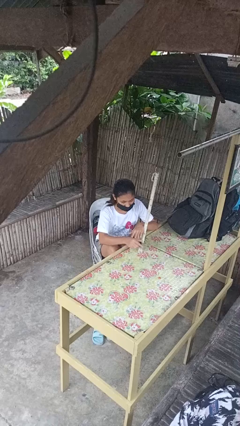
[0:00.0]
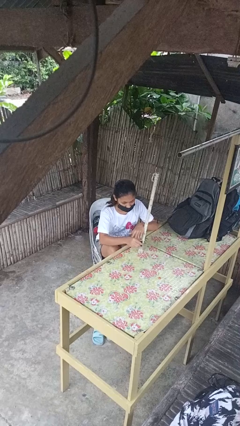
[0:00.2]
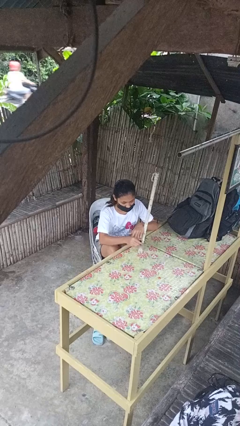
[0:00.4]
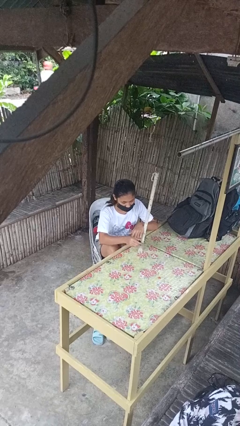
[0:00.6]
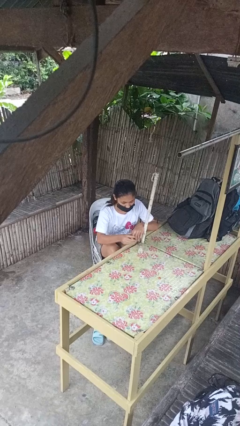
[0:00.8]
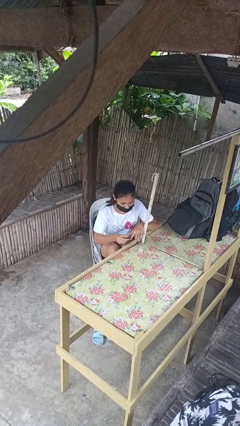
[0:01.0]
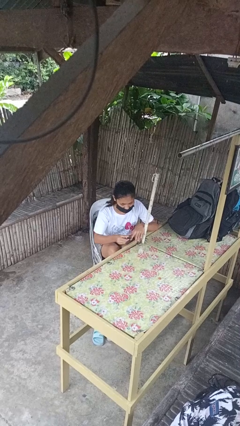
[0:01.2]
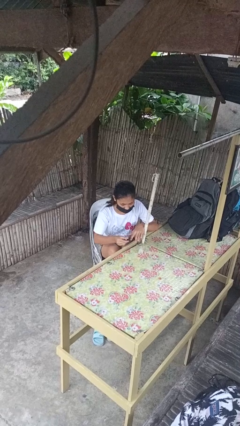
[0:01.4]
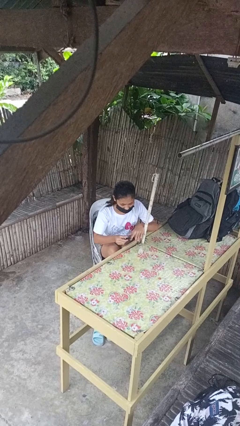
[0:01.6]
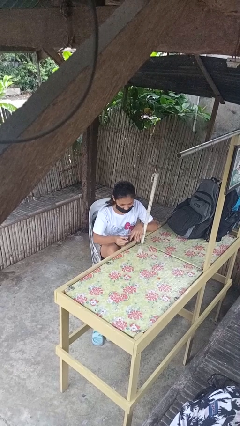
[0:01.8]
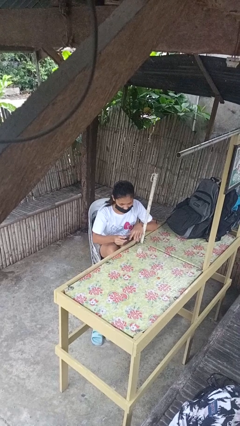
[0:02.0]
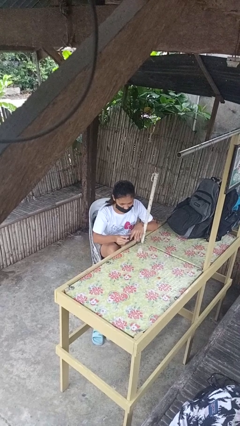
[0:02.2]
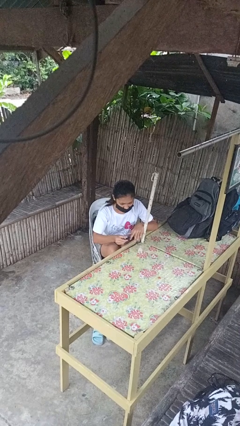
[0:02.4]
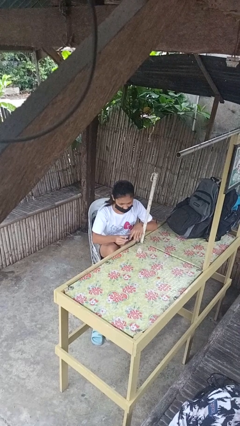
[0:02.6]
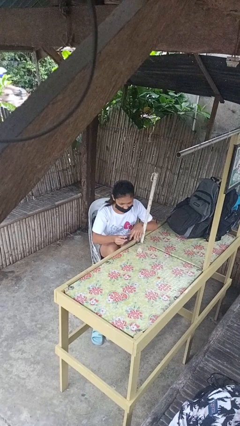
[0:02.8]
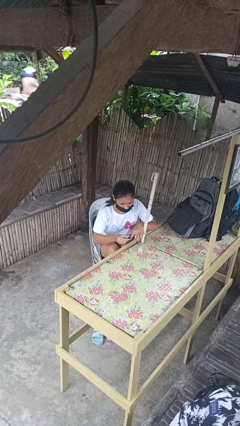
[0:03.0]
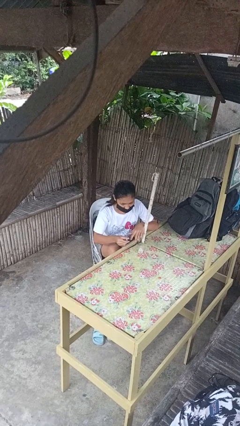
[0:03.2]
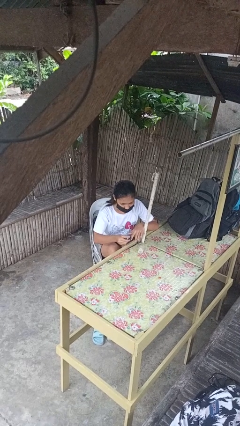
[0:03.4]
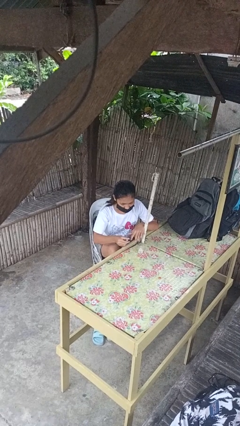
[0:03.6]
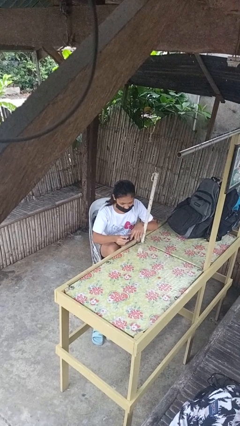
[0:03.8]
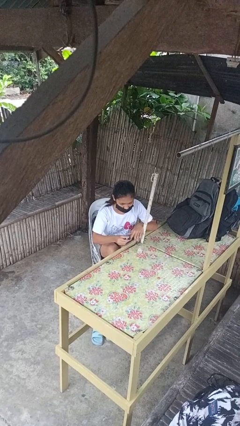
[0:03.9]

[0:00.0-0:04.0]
person paints fingernails

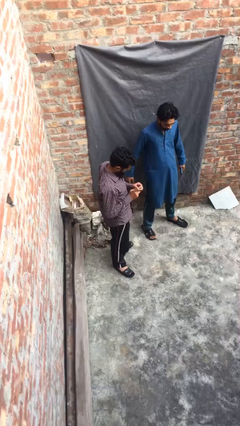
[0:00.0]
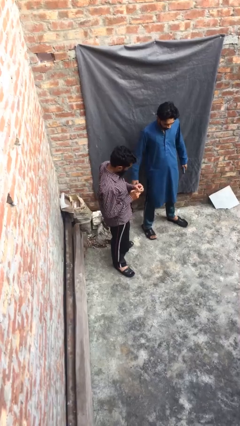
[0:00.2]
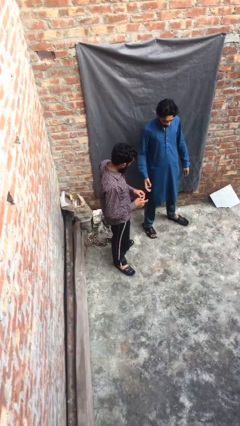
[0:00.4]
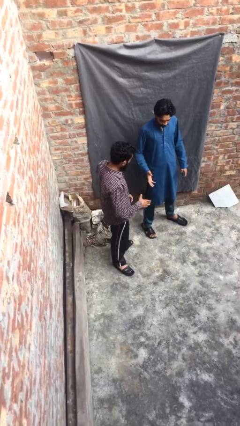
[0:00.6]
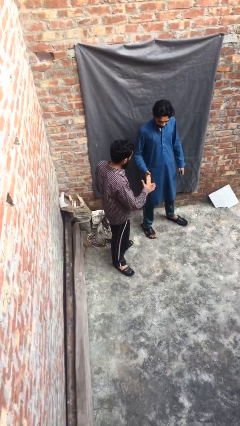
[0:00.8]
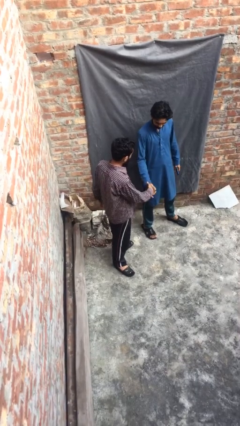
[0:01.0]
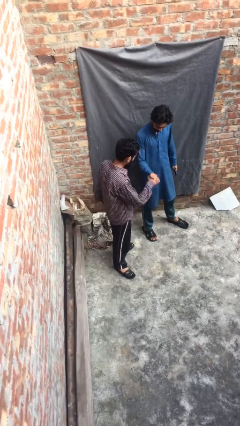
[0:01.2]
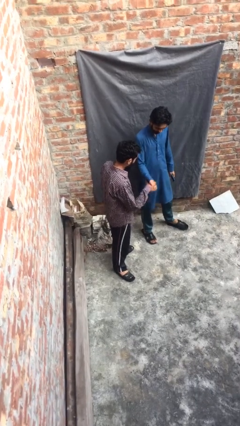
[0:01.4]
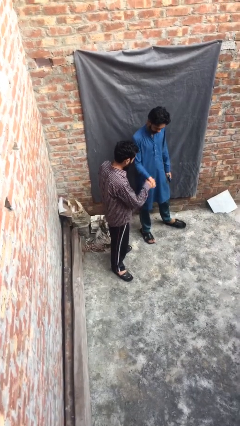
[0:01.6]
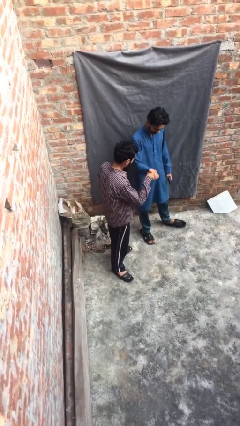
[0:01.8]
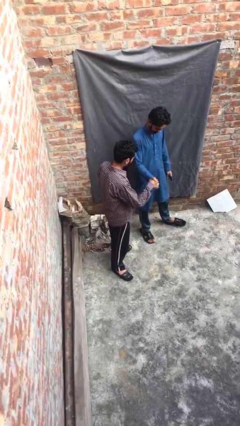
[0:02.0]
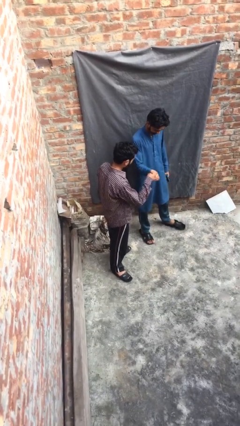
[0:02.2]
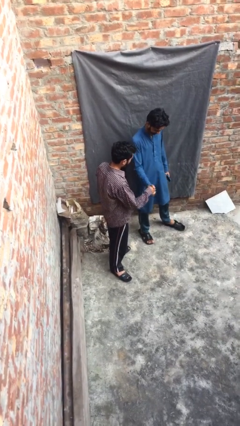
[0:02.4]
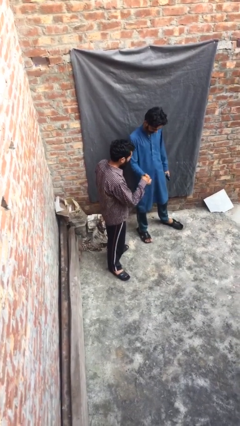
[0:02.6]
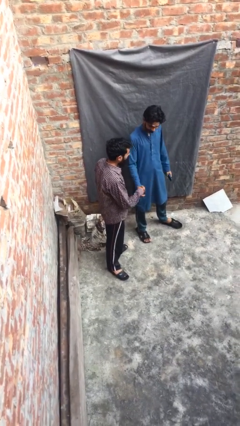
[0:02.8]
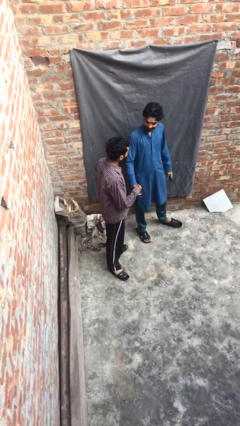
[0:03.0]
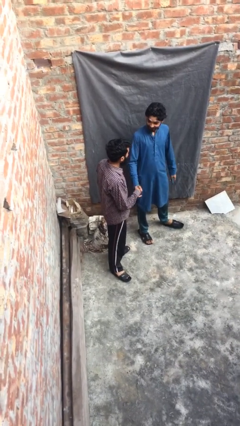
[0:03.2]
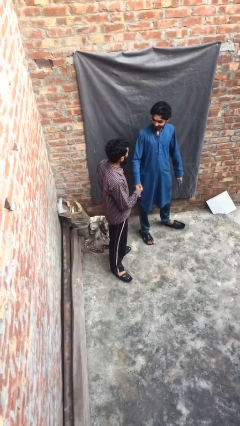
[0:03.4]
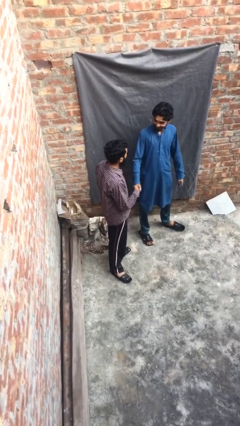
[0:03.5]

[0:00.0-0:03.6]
person shakes hand

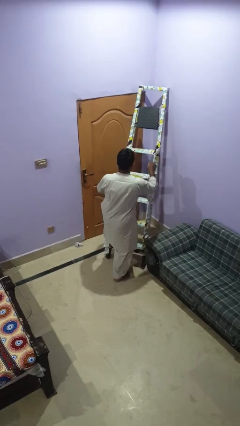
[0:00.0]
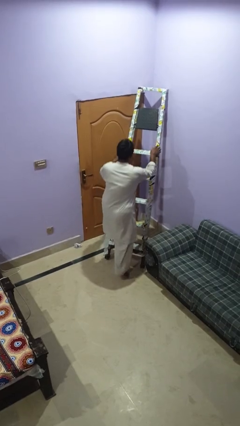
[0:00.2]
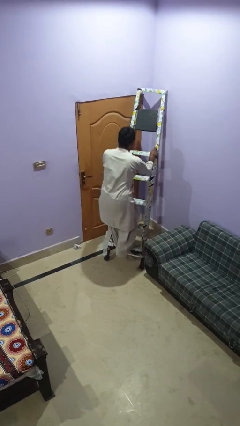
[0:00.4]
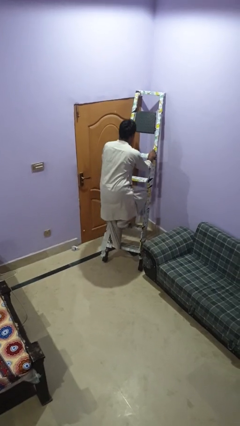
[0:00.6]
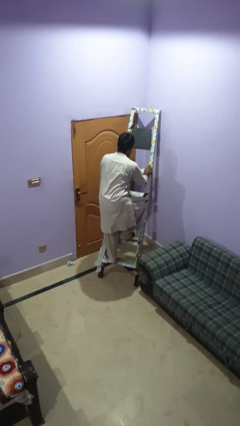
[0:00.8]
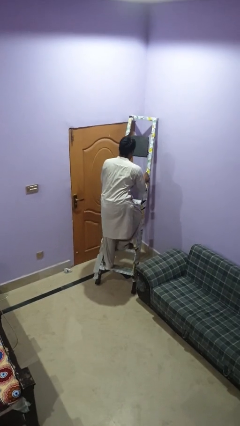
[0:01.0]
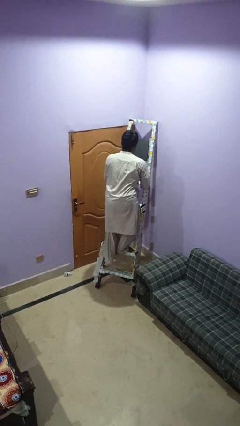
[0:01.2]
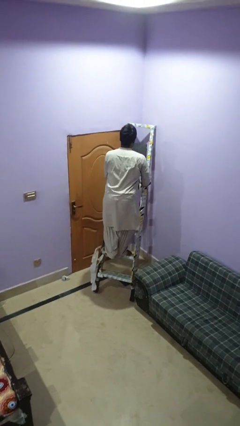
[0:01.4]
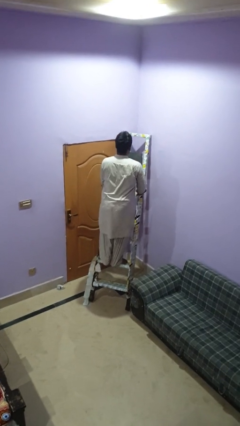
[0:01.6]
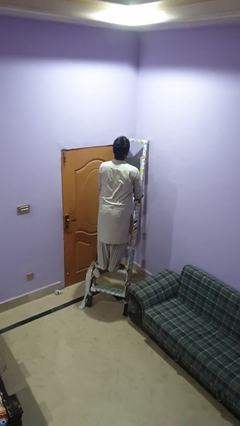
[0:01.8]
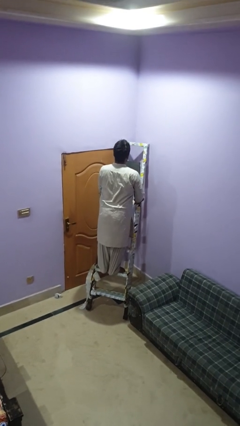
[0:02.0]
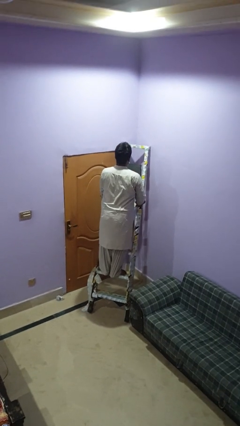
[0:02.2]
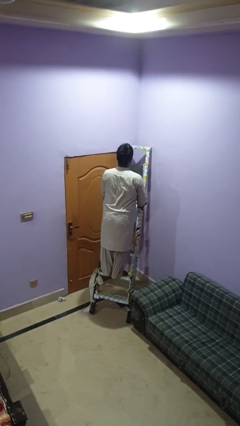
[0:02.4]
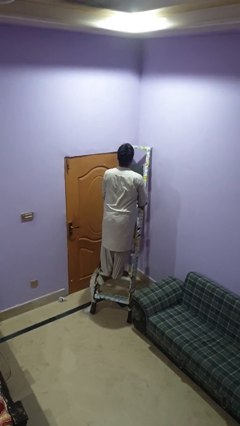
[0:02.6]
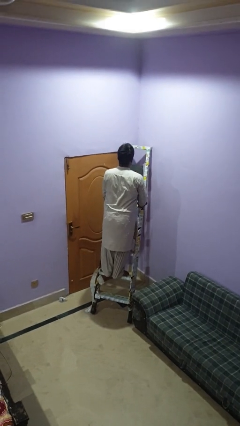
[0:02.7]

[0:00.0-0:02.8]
person climbs up ladder

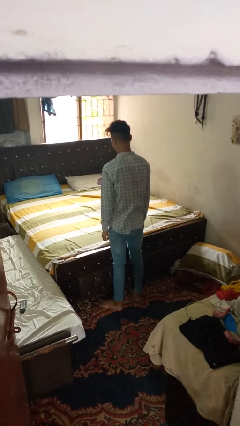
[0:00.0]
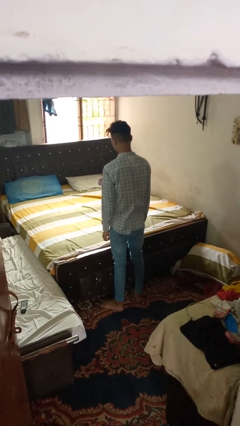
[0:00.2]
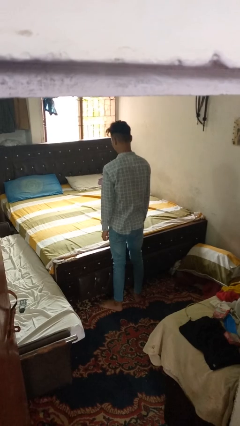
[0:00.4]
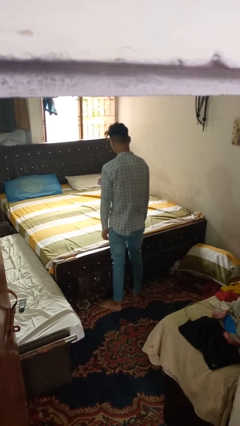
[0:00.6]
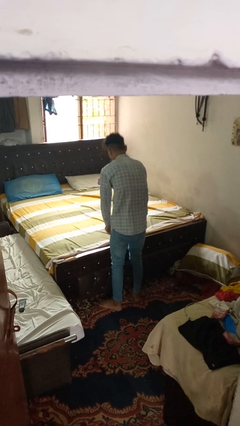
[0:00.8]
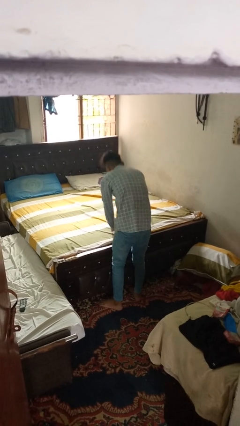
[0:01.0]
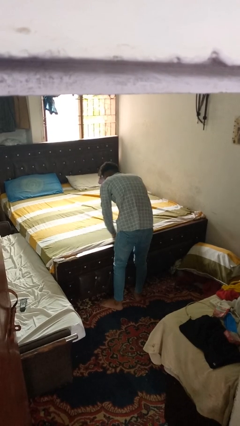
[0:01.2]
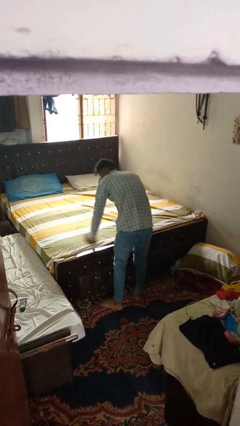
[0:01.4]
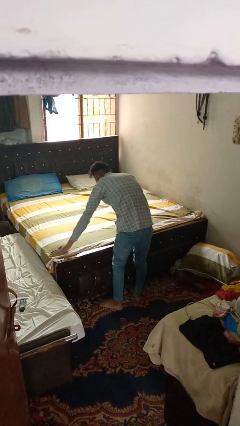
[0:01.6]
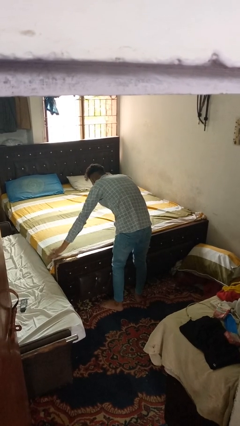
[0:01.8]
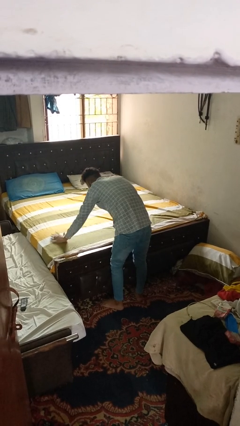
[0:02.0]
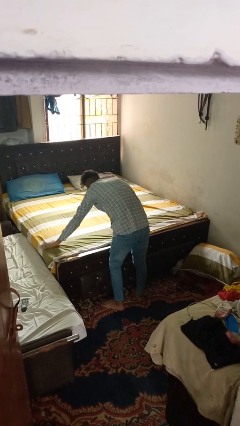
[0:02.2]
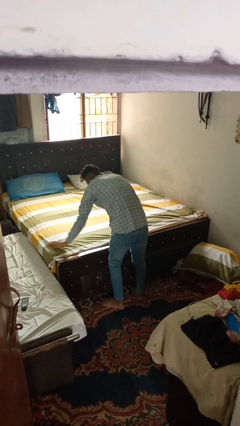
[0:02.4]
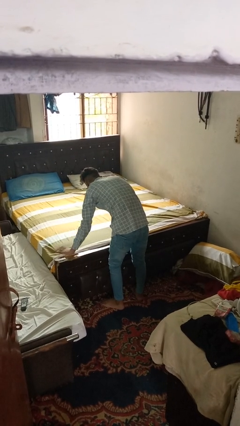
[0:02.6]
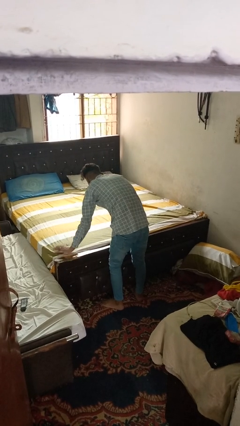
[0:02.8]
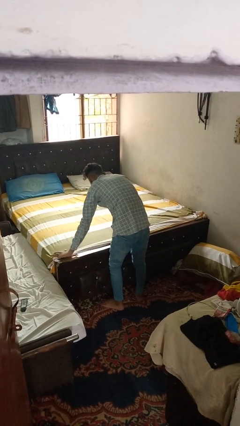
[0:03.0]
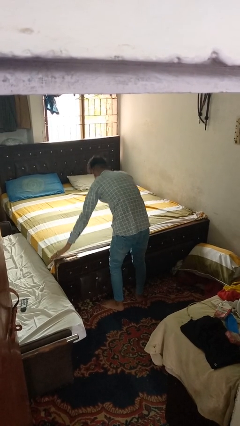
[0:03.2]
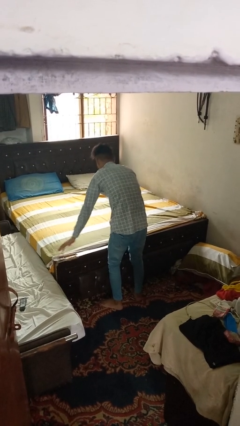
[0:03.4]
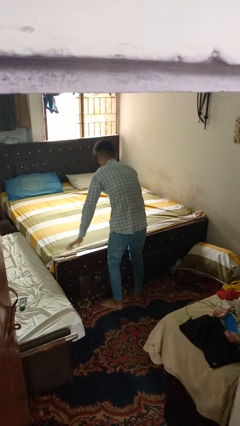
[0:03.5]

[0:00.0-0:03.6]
person makes bed

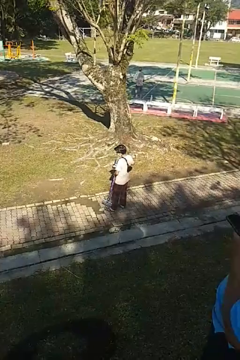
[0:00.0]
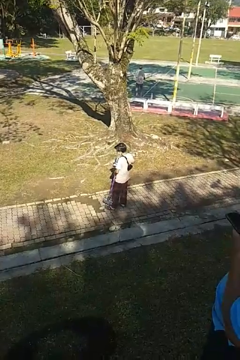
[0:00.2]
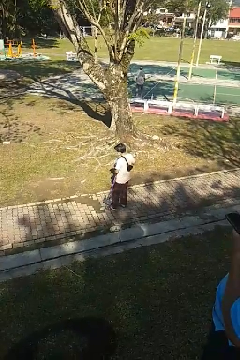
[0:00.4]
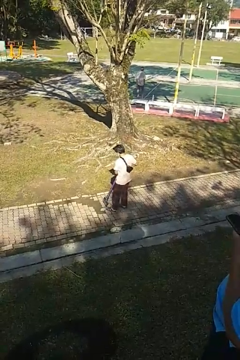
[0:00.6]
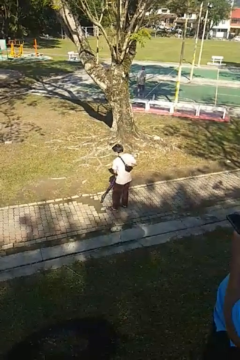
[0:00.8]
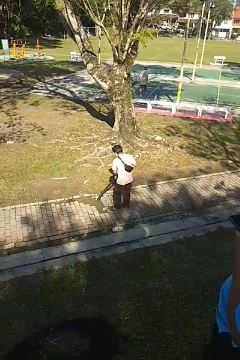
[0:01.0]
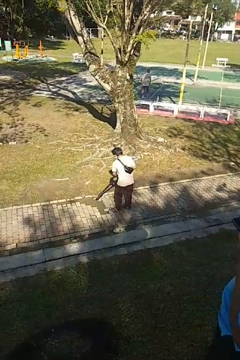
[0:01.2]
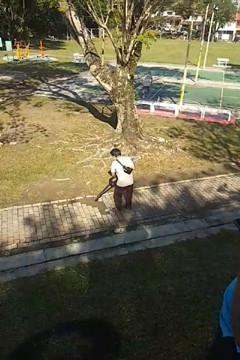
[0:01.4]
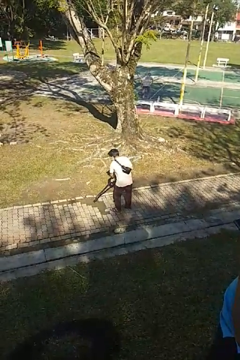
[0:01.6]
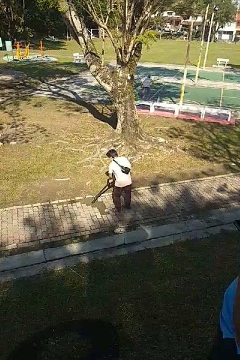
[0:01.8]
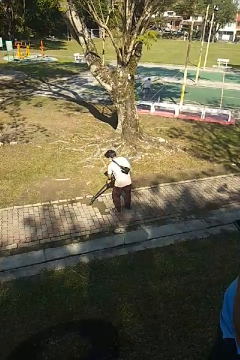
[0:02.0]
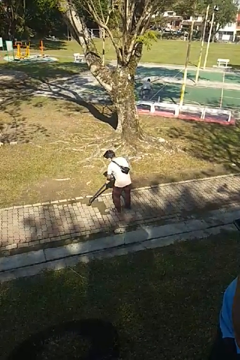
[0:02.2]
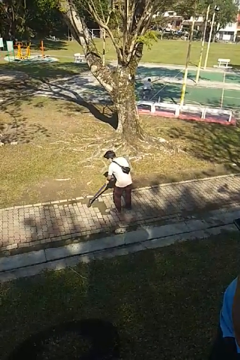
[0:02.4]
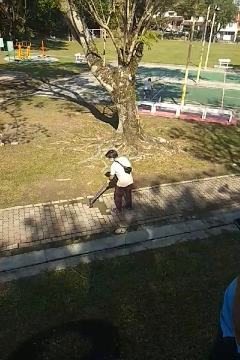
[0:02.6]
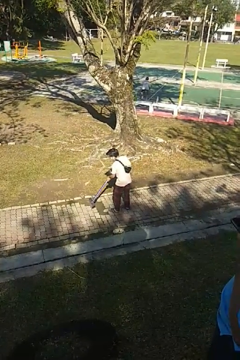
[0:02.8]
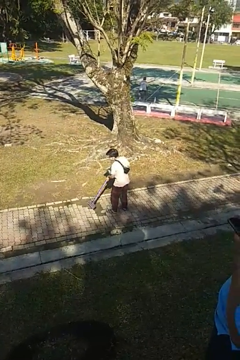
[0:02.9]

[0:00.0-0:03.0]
person vacuums carpet

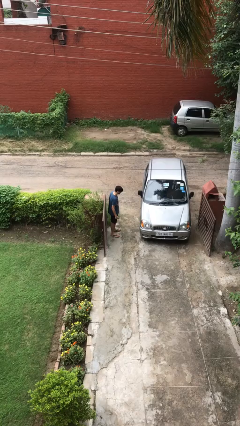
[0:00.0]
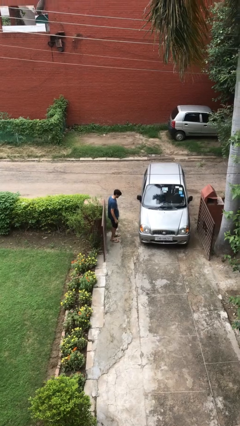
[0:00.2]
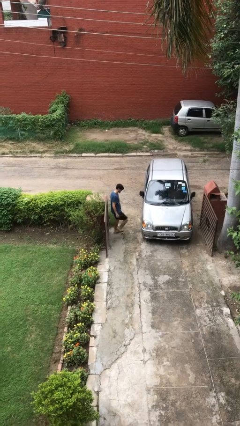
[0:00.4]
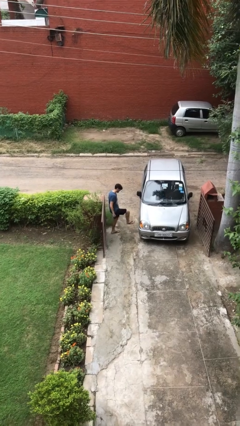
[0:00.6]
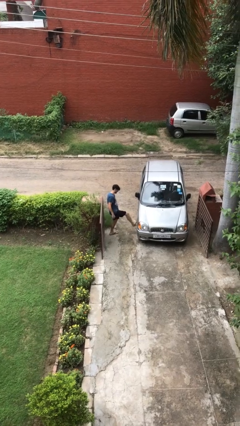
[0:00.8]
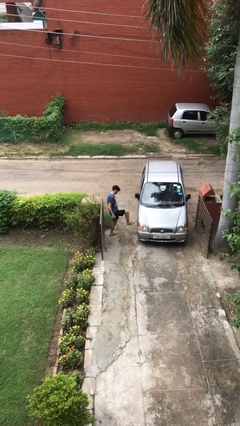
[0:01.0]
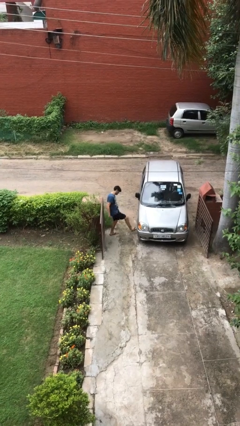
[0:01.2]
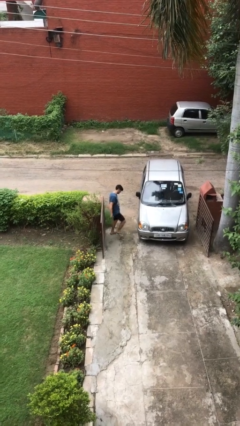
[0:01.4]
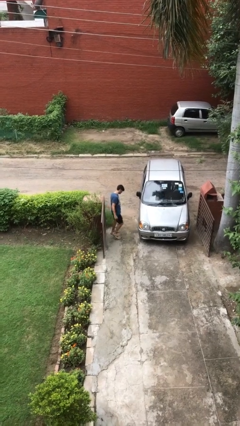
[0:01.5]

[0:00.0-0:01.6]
person kicks car tires
